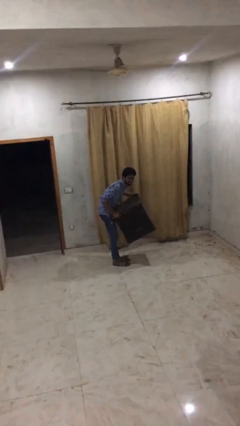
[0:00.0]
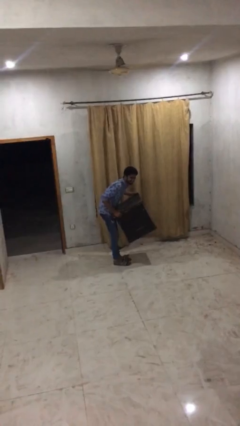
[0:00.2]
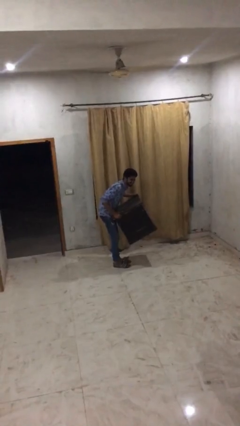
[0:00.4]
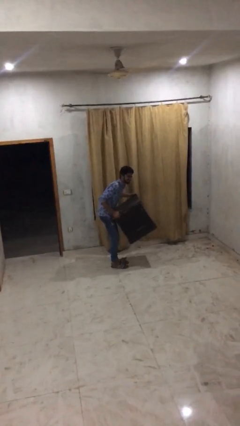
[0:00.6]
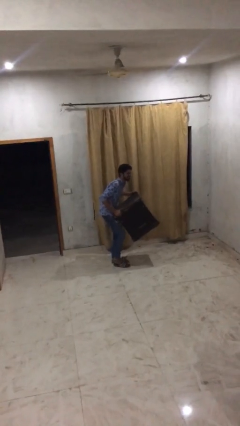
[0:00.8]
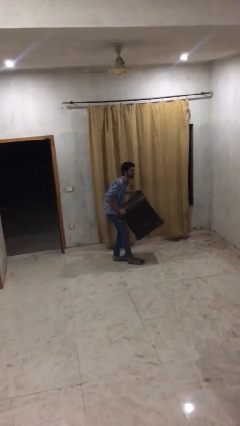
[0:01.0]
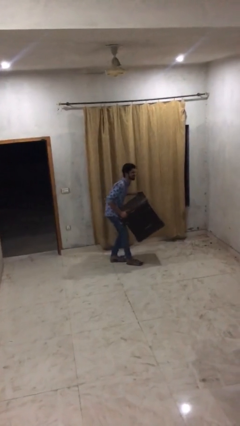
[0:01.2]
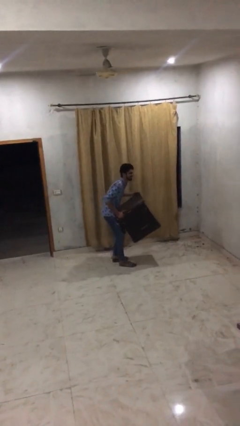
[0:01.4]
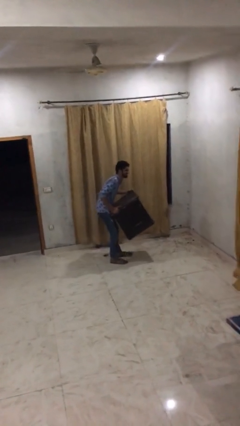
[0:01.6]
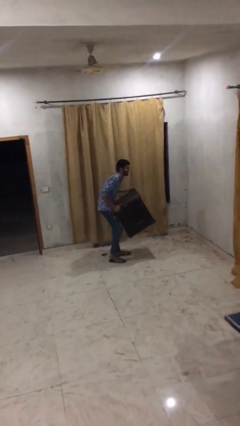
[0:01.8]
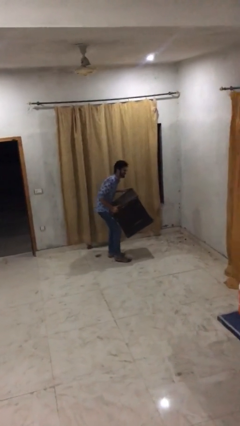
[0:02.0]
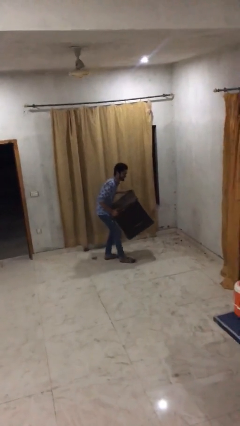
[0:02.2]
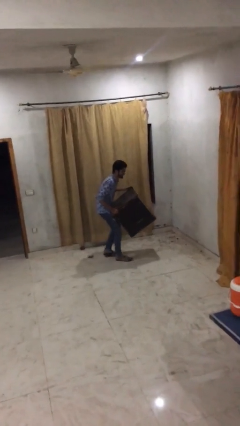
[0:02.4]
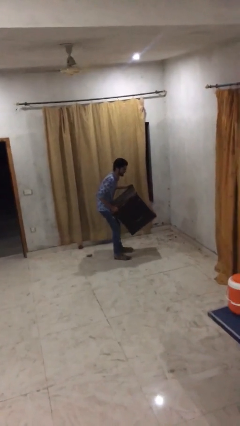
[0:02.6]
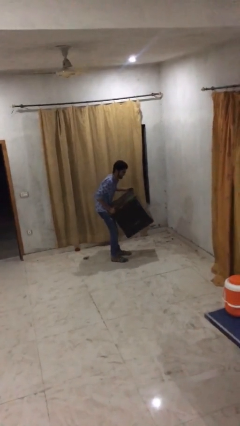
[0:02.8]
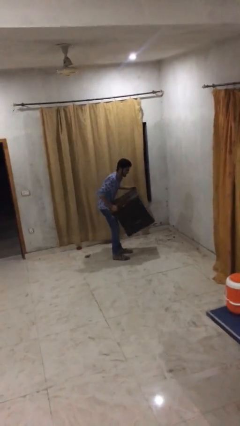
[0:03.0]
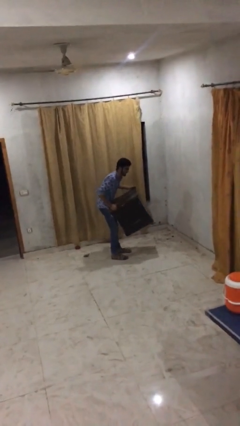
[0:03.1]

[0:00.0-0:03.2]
person carries heavy object

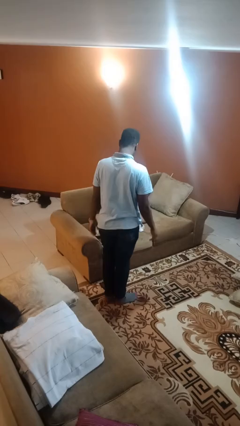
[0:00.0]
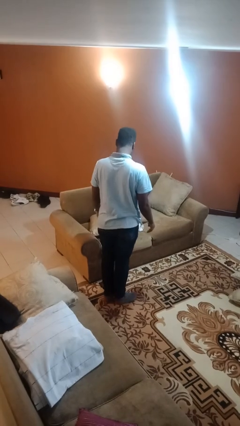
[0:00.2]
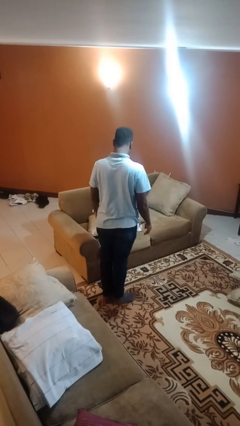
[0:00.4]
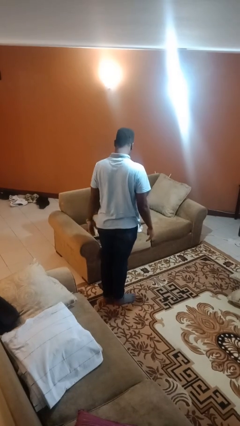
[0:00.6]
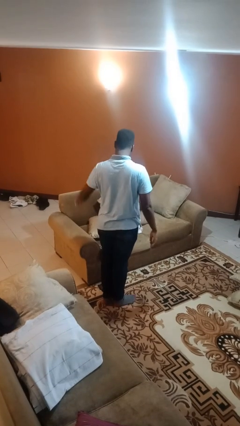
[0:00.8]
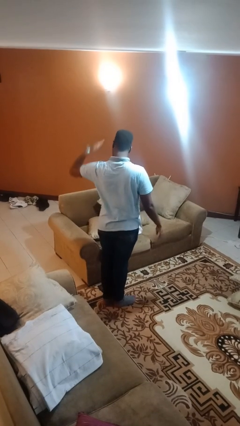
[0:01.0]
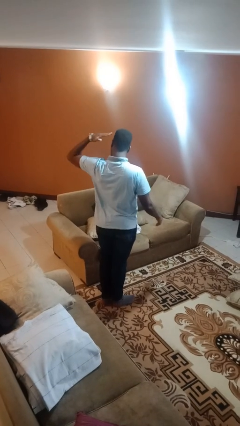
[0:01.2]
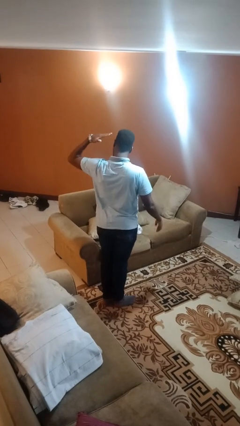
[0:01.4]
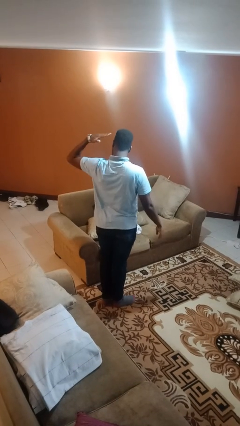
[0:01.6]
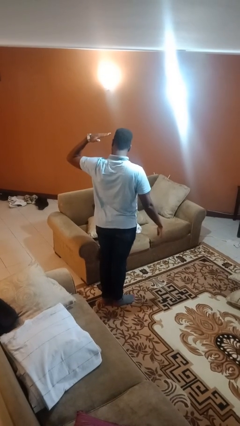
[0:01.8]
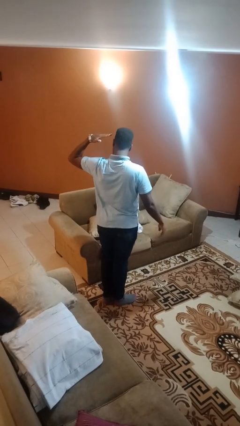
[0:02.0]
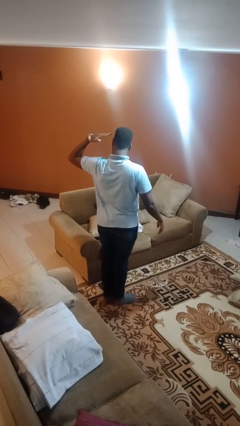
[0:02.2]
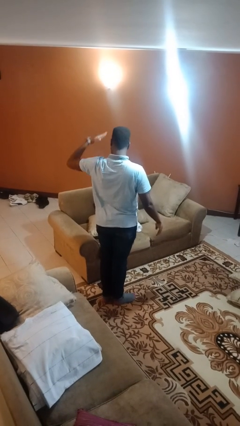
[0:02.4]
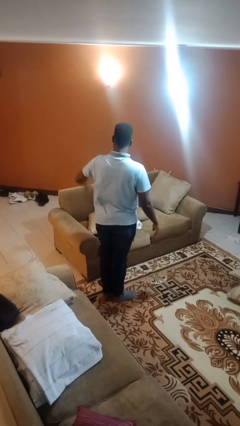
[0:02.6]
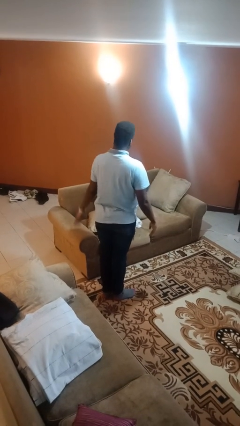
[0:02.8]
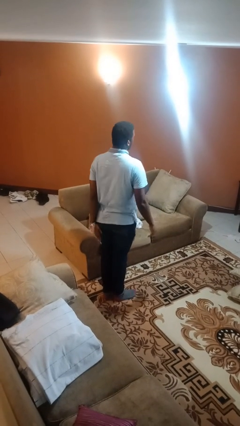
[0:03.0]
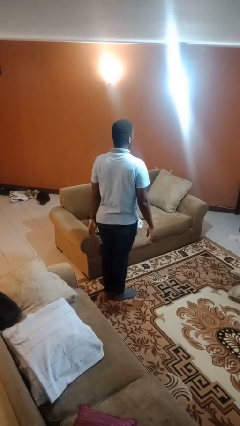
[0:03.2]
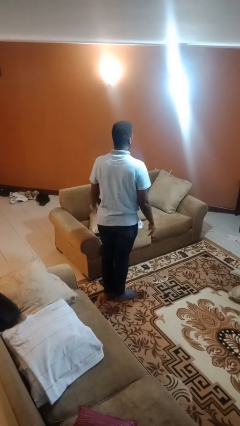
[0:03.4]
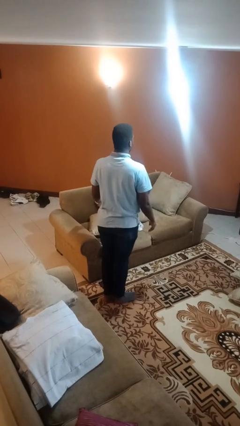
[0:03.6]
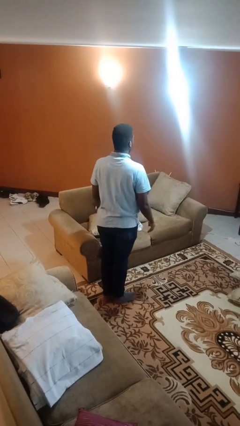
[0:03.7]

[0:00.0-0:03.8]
person salutes

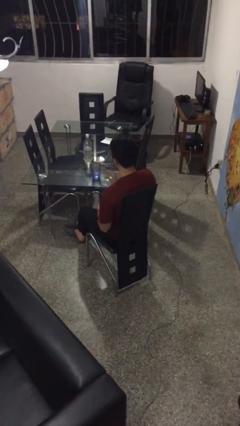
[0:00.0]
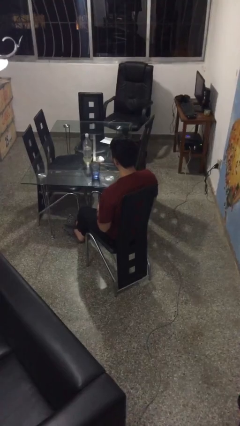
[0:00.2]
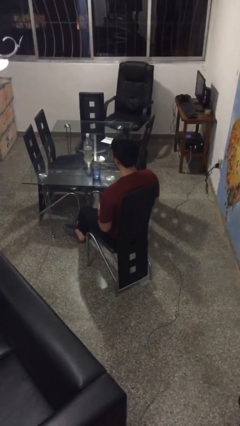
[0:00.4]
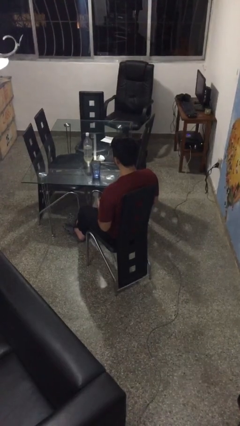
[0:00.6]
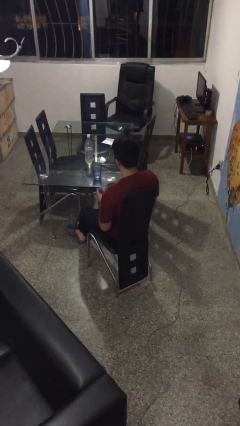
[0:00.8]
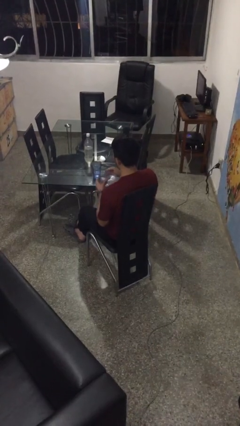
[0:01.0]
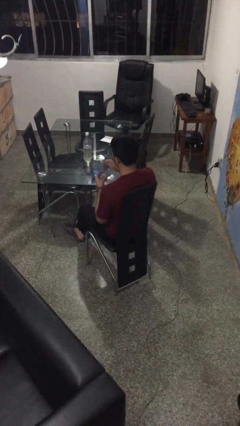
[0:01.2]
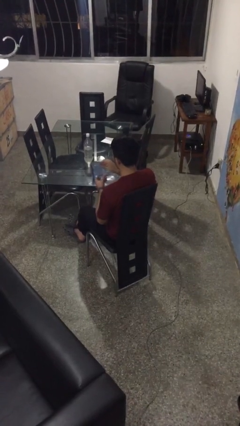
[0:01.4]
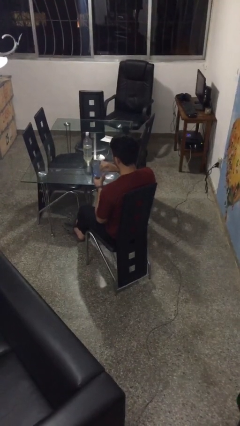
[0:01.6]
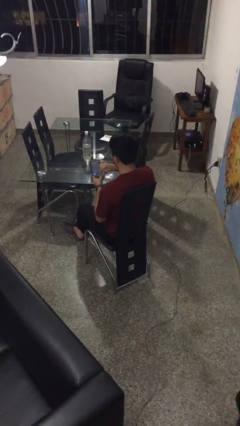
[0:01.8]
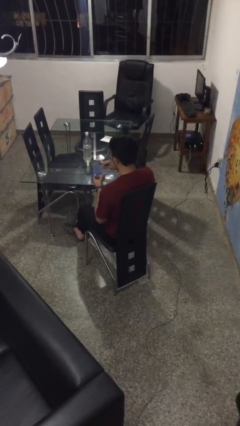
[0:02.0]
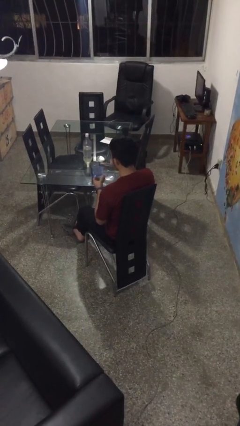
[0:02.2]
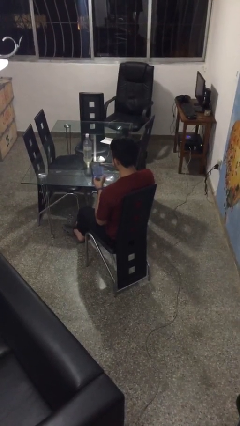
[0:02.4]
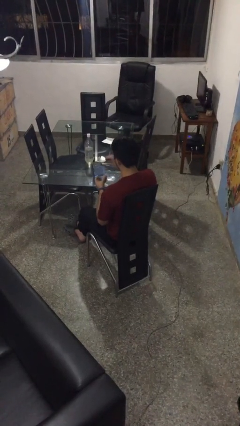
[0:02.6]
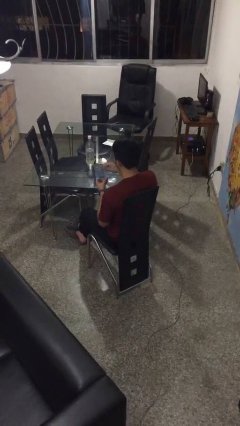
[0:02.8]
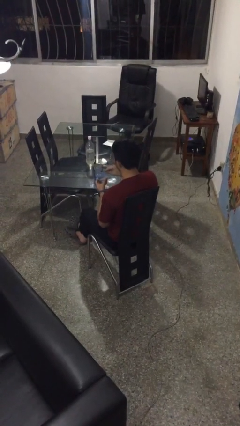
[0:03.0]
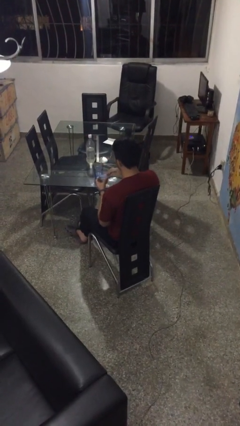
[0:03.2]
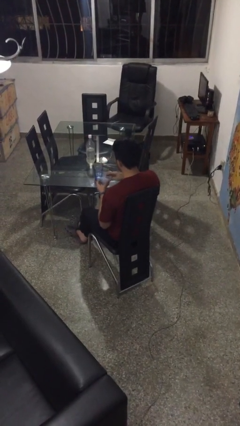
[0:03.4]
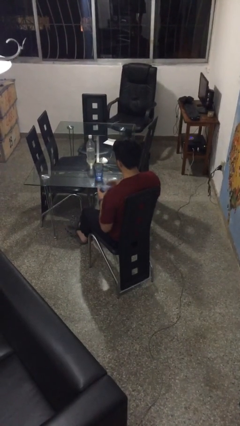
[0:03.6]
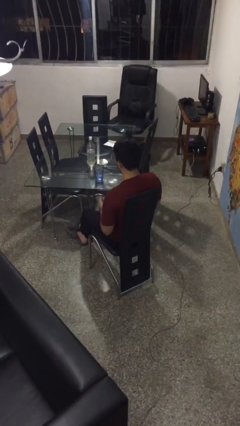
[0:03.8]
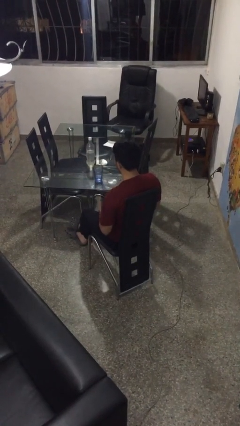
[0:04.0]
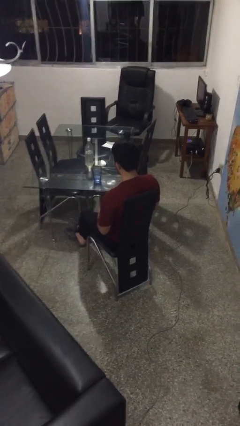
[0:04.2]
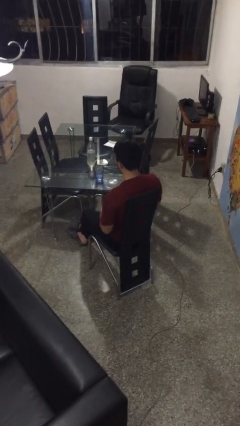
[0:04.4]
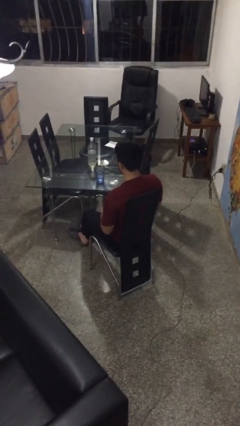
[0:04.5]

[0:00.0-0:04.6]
person takes medicine pills

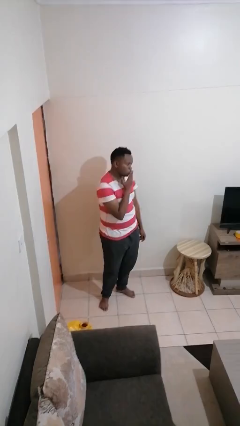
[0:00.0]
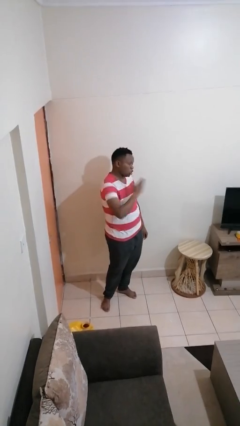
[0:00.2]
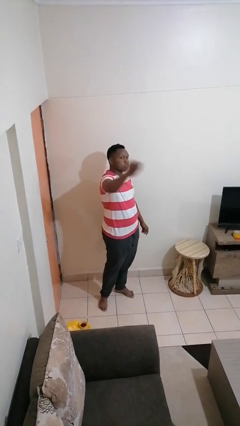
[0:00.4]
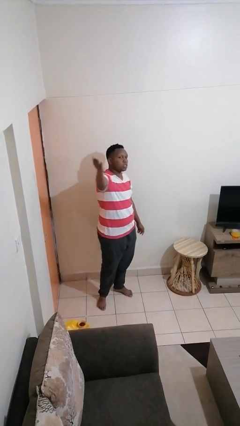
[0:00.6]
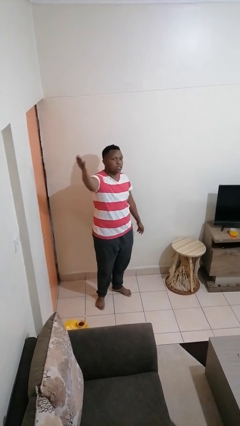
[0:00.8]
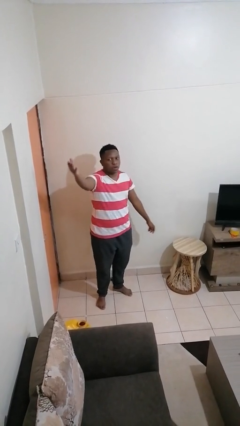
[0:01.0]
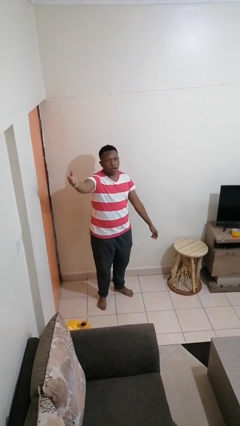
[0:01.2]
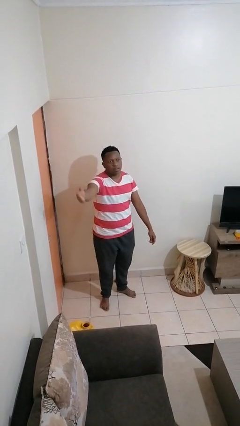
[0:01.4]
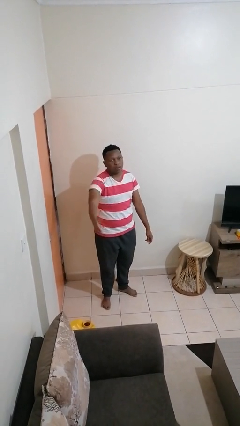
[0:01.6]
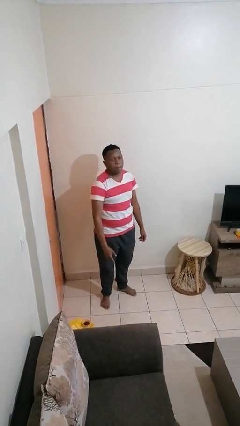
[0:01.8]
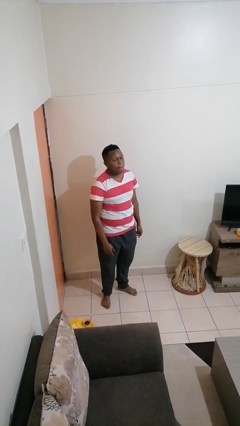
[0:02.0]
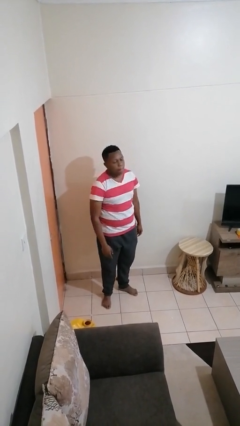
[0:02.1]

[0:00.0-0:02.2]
person gestures blow kiss

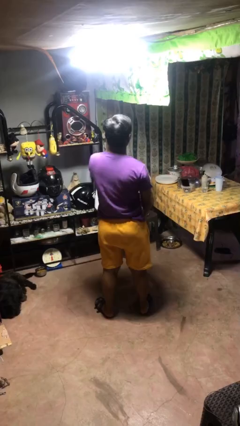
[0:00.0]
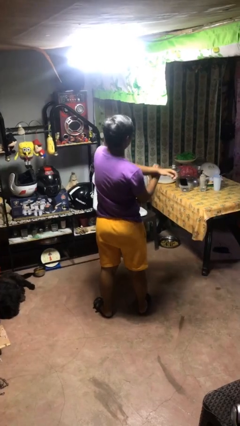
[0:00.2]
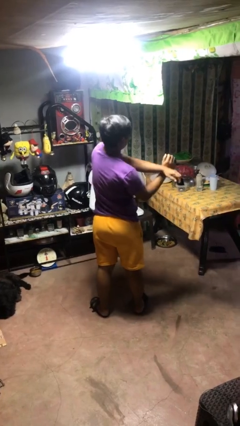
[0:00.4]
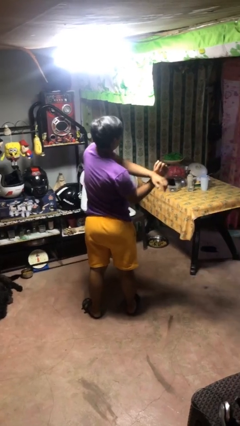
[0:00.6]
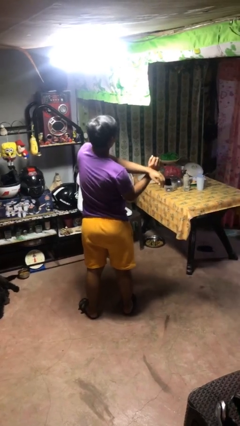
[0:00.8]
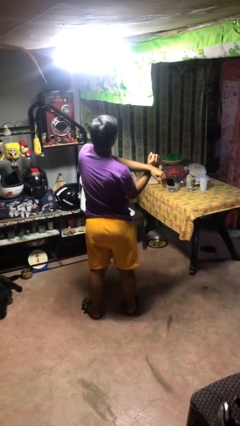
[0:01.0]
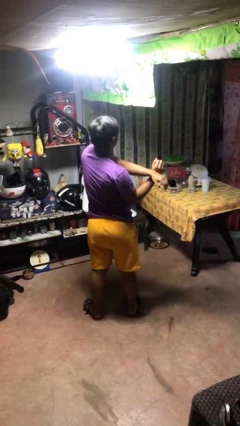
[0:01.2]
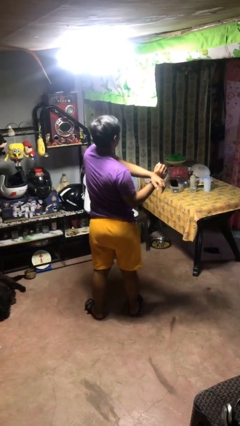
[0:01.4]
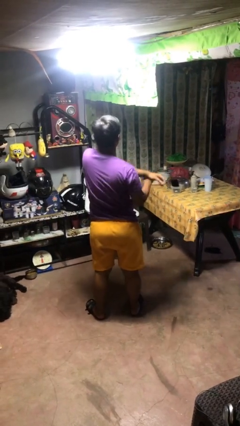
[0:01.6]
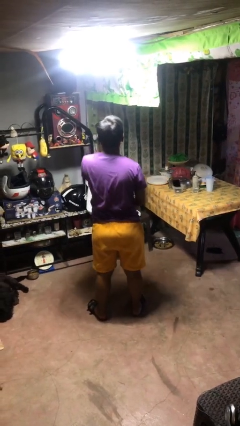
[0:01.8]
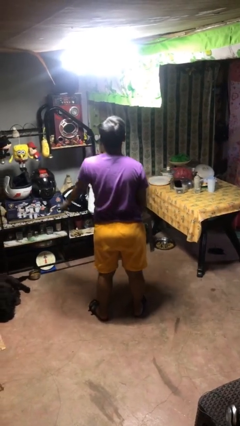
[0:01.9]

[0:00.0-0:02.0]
person crosses arms

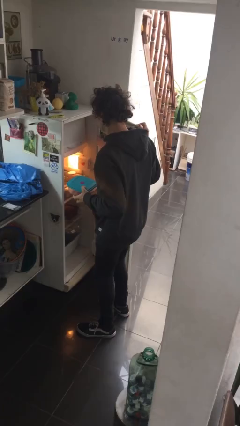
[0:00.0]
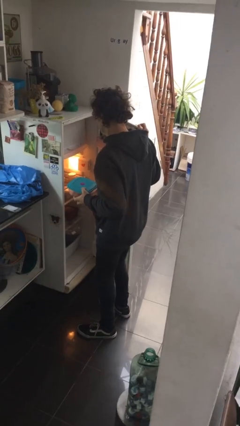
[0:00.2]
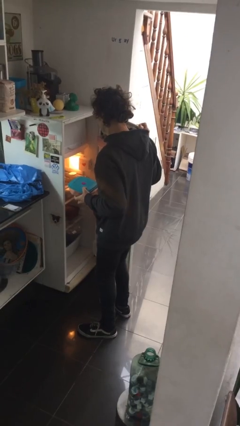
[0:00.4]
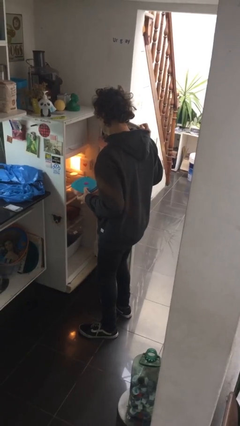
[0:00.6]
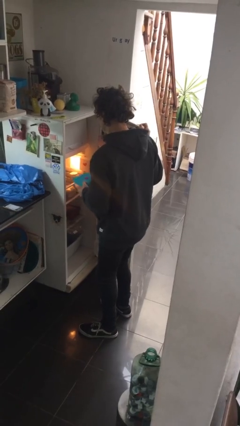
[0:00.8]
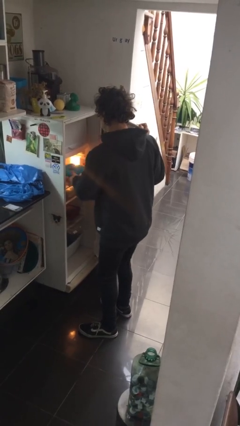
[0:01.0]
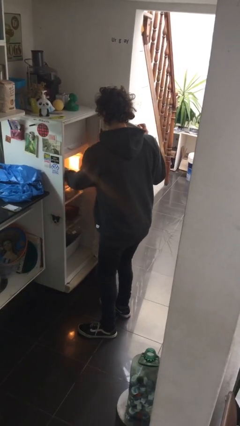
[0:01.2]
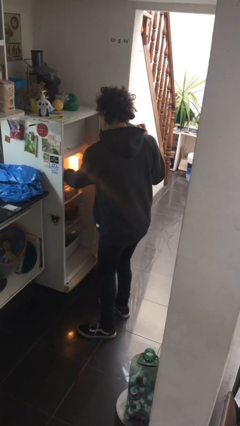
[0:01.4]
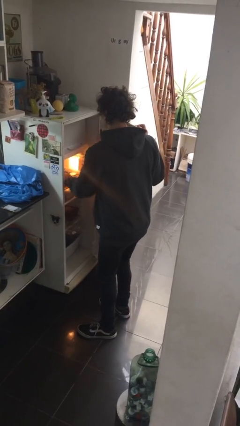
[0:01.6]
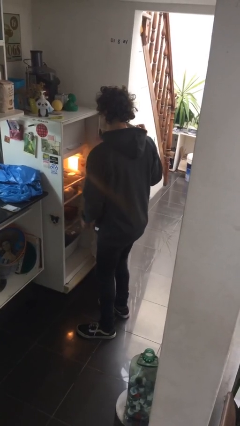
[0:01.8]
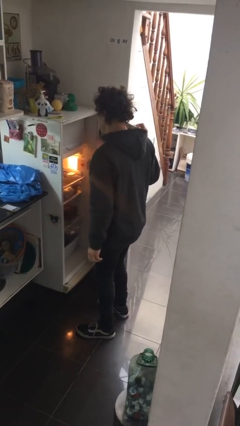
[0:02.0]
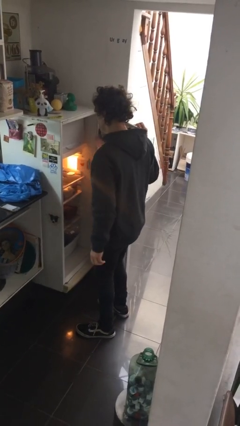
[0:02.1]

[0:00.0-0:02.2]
person puts object into refrigerator
